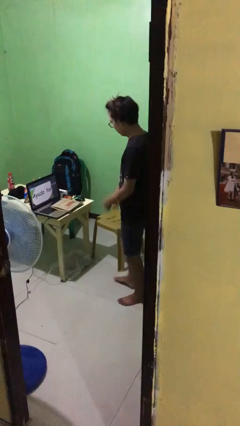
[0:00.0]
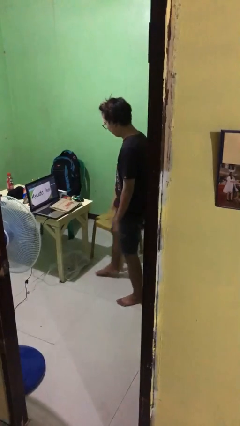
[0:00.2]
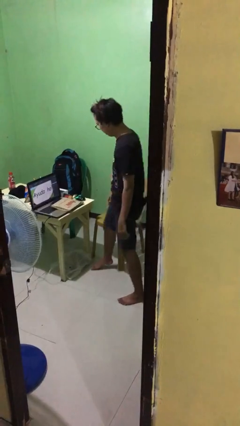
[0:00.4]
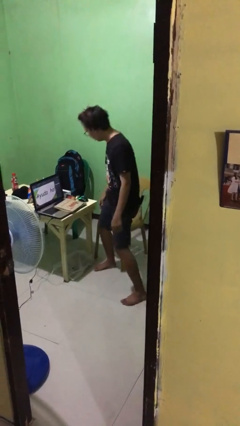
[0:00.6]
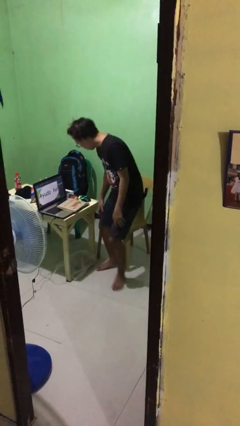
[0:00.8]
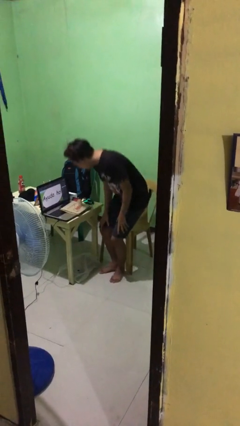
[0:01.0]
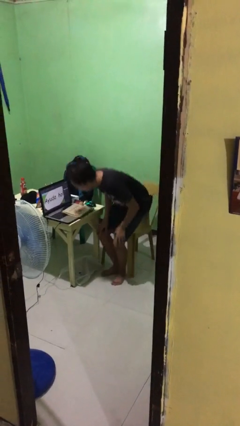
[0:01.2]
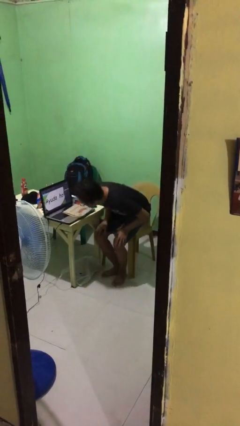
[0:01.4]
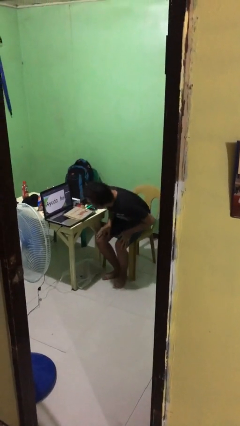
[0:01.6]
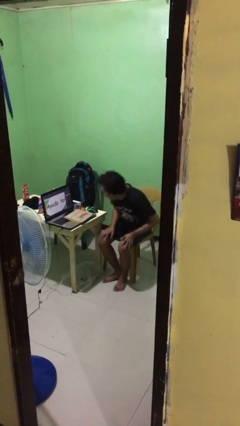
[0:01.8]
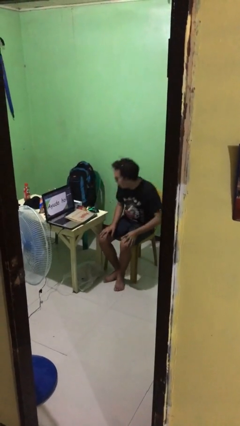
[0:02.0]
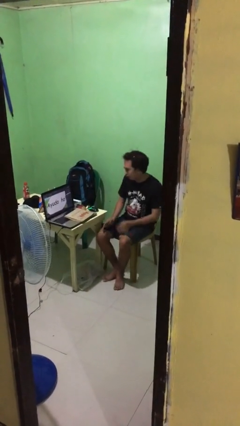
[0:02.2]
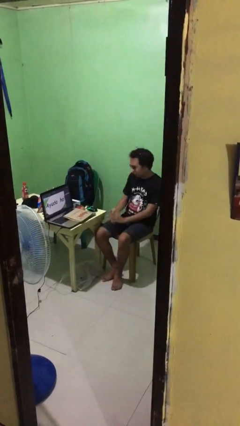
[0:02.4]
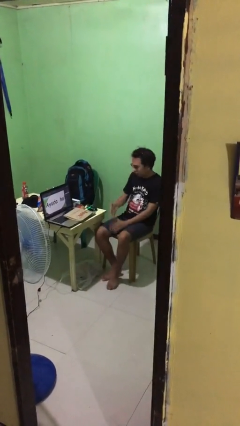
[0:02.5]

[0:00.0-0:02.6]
person sits down

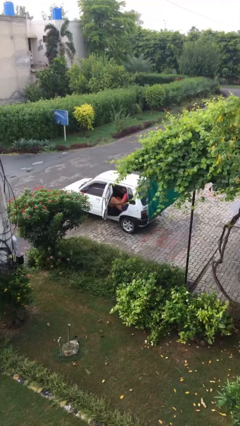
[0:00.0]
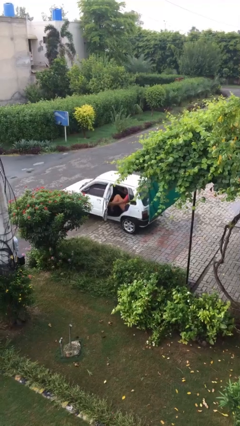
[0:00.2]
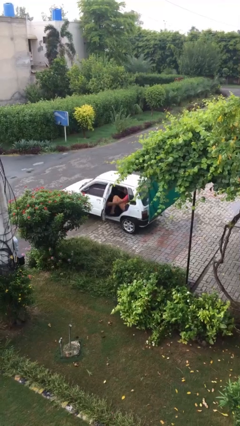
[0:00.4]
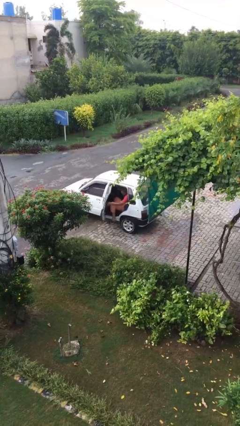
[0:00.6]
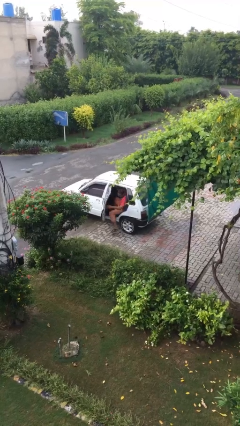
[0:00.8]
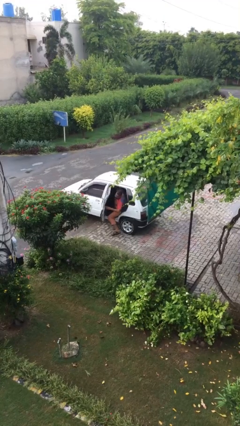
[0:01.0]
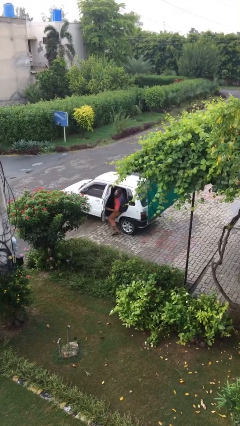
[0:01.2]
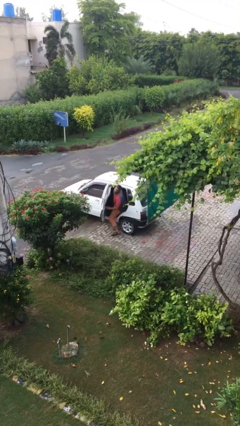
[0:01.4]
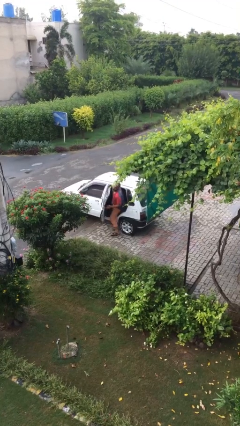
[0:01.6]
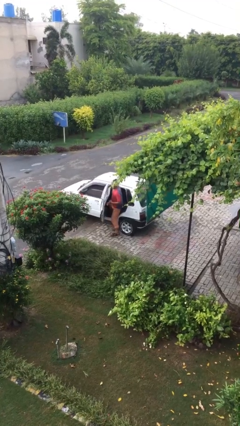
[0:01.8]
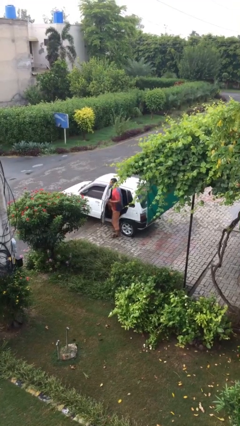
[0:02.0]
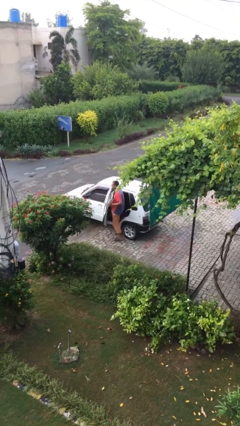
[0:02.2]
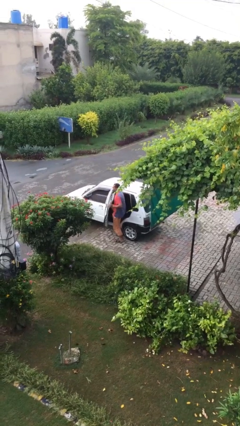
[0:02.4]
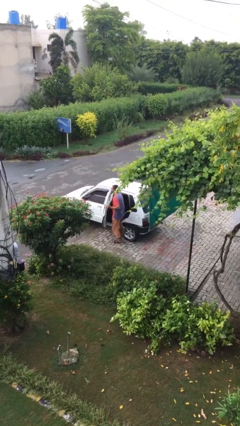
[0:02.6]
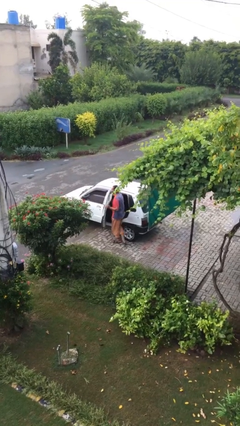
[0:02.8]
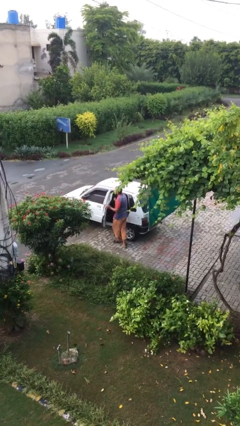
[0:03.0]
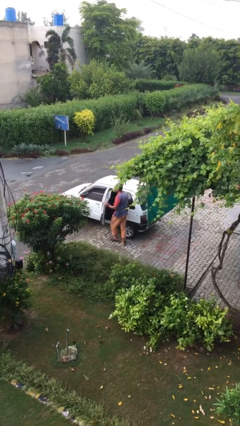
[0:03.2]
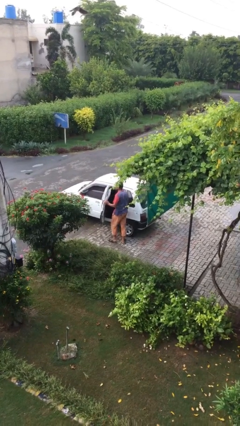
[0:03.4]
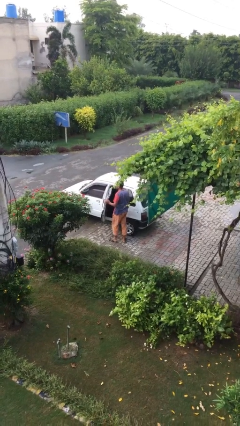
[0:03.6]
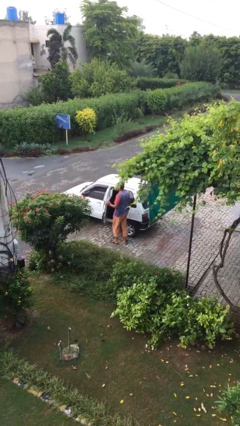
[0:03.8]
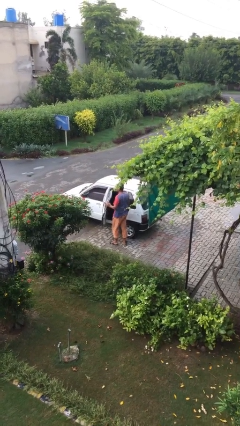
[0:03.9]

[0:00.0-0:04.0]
person exits car

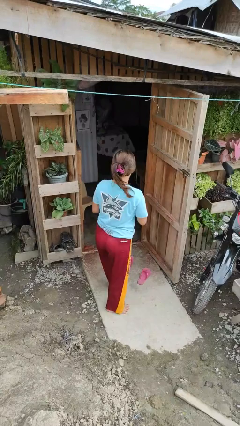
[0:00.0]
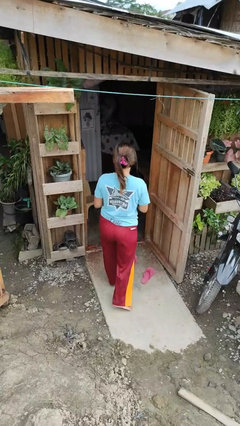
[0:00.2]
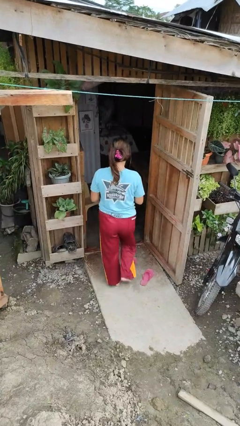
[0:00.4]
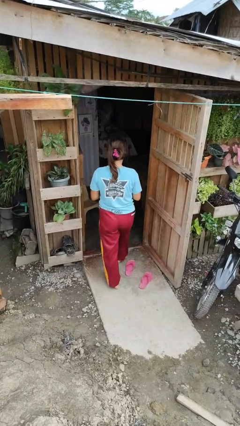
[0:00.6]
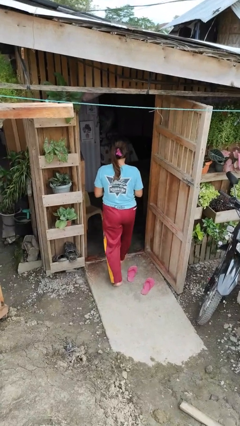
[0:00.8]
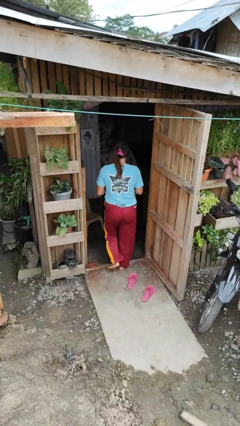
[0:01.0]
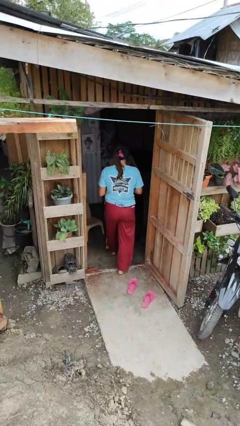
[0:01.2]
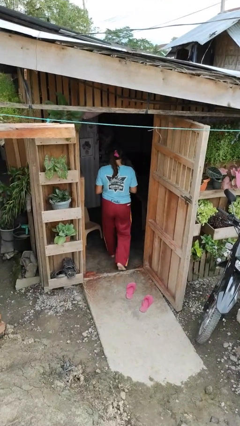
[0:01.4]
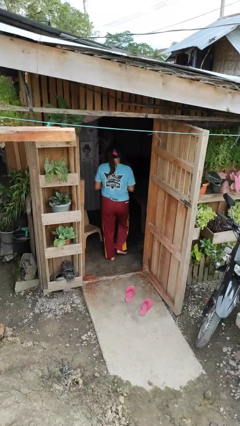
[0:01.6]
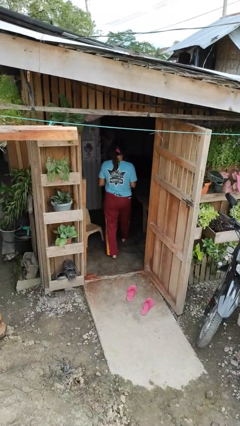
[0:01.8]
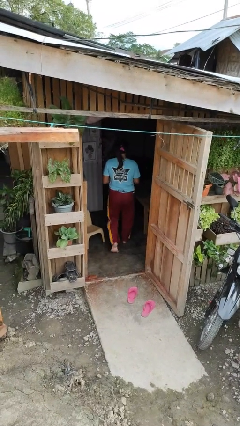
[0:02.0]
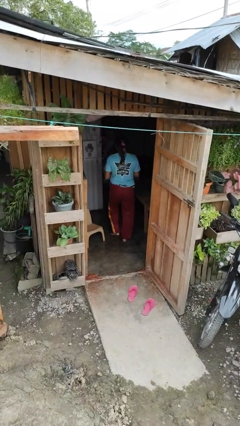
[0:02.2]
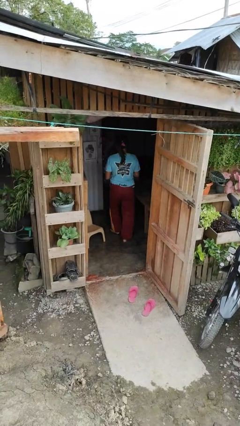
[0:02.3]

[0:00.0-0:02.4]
person exits scene through structure

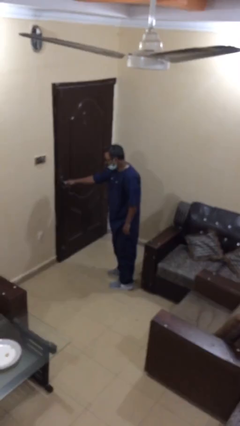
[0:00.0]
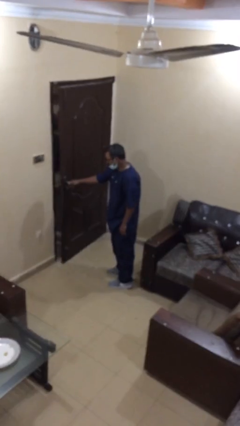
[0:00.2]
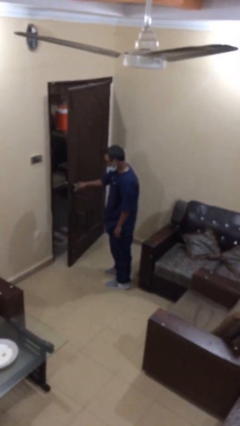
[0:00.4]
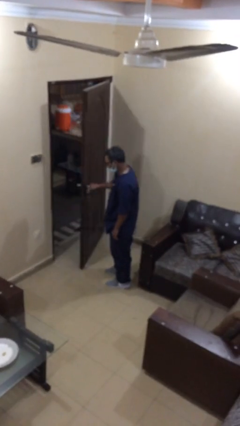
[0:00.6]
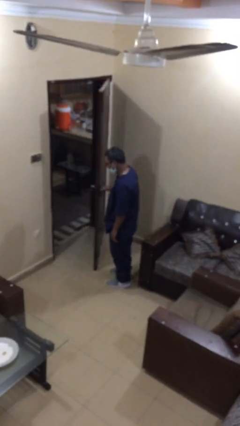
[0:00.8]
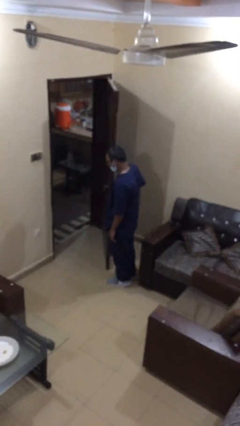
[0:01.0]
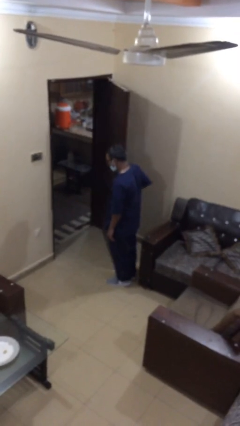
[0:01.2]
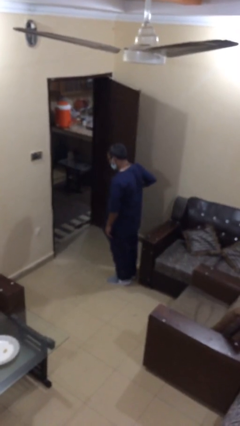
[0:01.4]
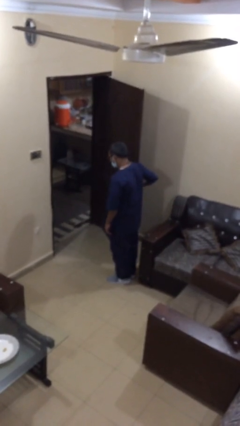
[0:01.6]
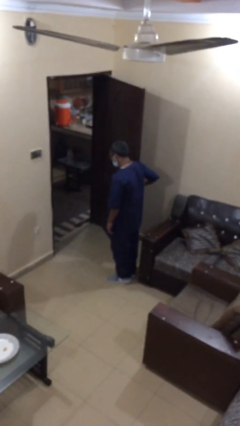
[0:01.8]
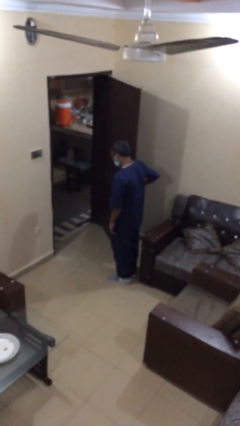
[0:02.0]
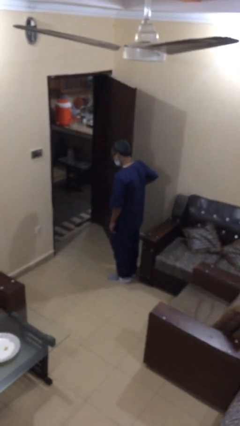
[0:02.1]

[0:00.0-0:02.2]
person opens facility door

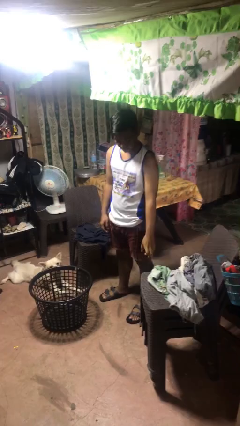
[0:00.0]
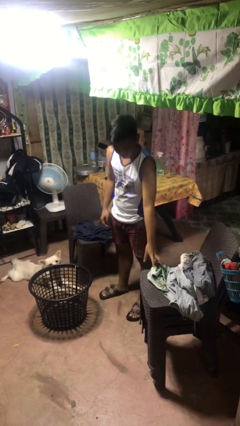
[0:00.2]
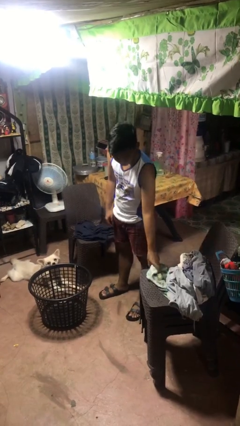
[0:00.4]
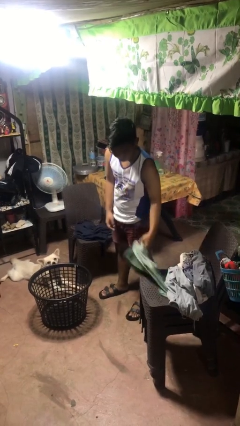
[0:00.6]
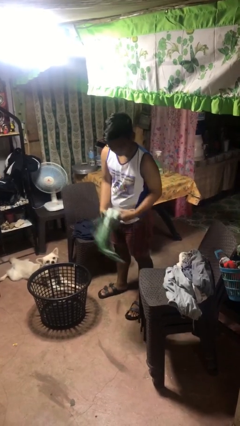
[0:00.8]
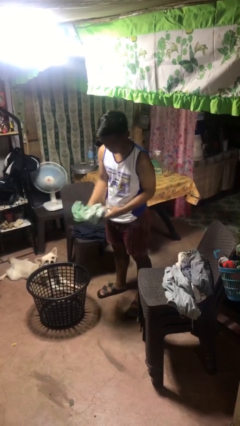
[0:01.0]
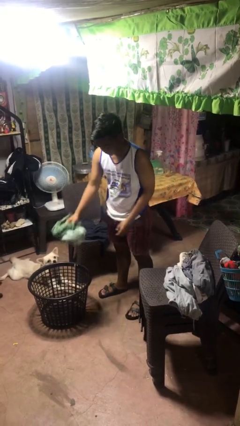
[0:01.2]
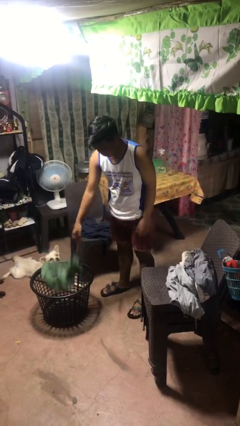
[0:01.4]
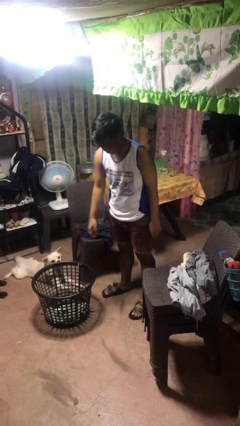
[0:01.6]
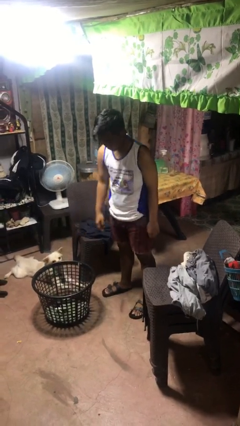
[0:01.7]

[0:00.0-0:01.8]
person puts object into basket

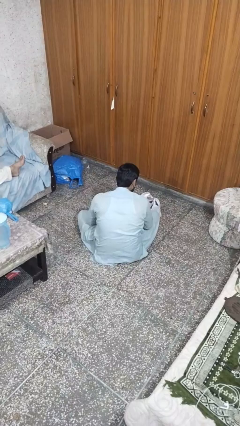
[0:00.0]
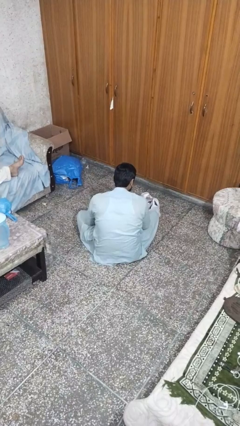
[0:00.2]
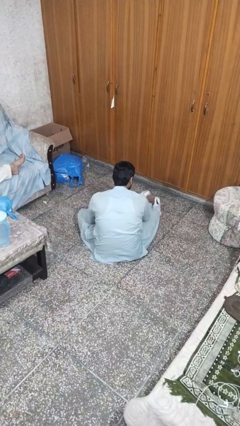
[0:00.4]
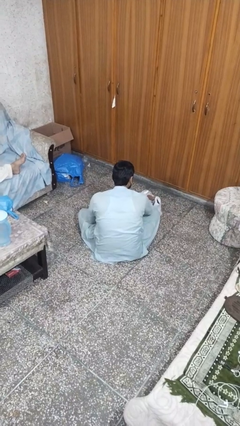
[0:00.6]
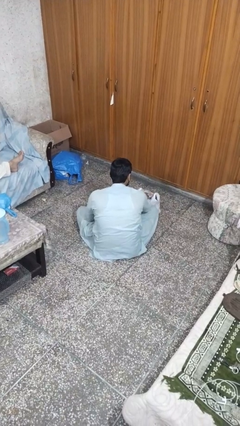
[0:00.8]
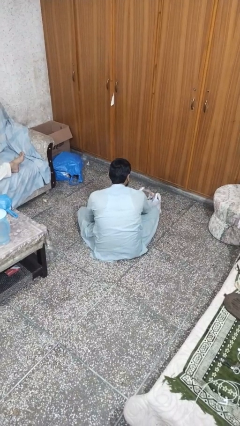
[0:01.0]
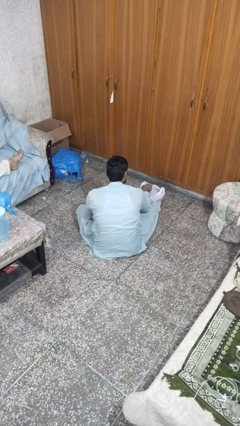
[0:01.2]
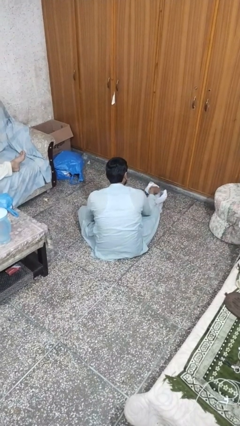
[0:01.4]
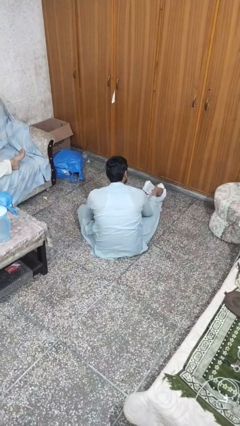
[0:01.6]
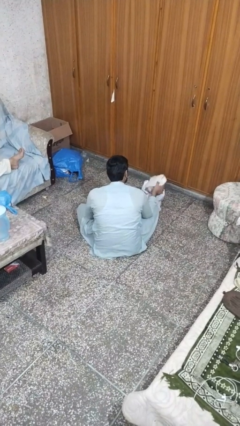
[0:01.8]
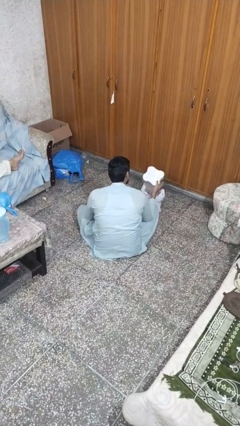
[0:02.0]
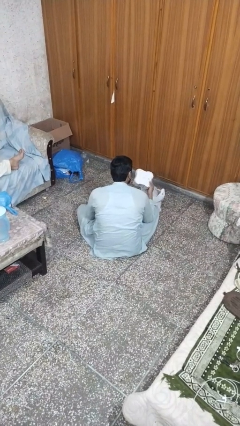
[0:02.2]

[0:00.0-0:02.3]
person takes object from bag

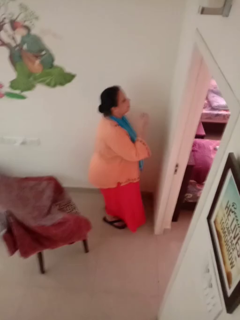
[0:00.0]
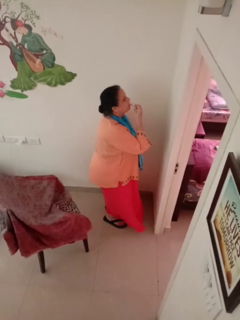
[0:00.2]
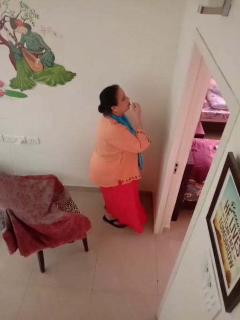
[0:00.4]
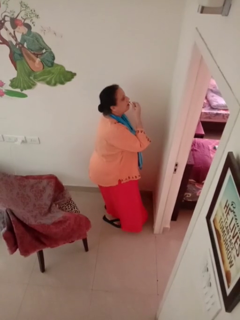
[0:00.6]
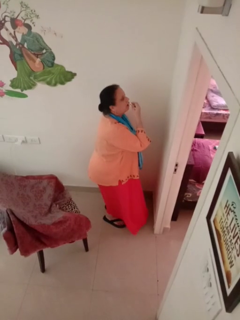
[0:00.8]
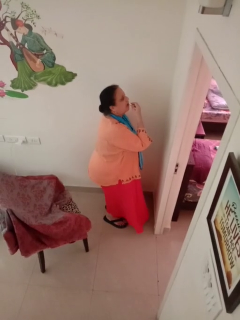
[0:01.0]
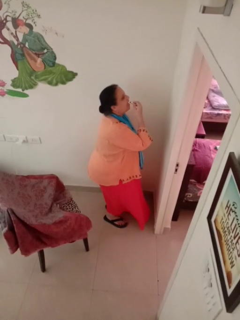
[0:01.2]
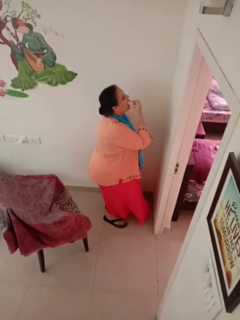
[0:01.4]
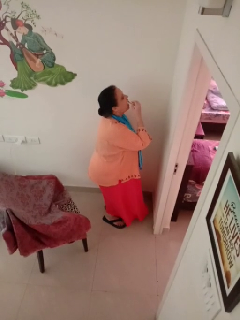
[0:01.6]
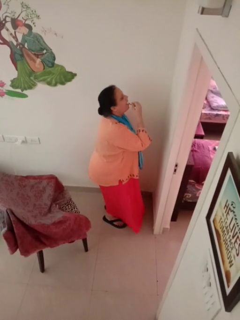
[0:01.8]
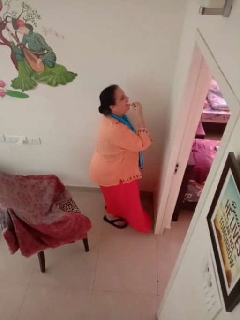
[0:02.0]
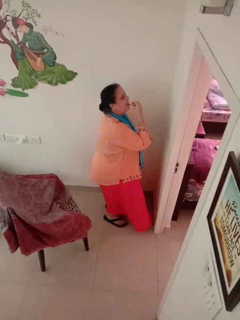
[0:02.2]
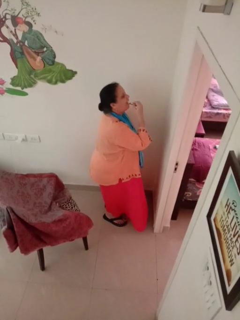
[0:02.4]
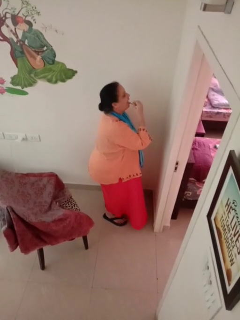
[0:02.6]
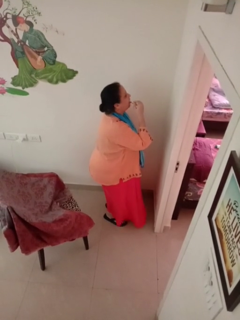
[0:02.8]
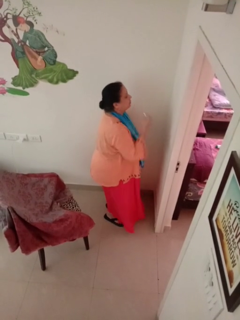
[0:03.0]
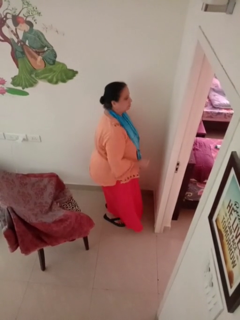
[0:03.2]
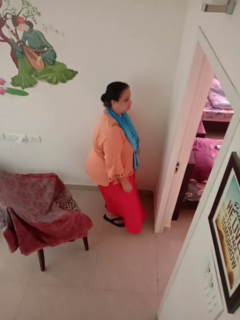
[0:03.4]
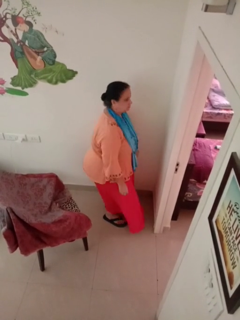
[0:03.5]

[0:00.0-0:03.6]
person applies lip makeup
